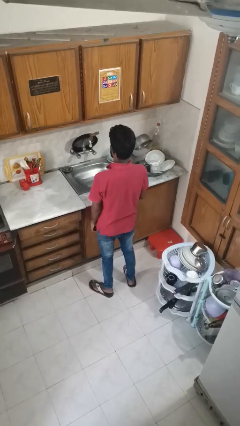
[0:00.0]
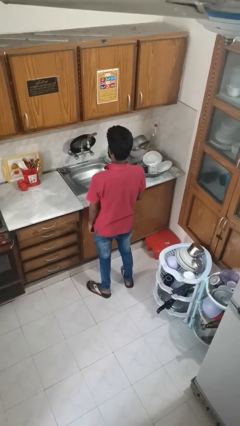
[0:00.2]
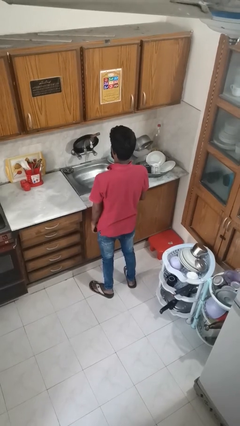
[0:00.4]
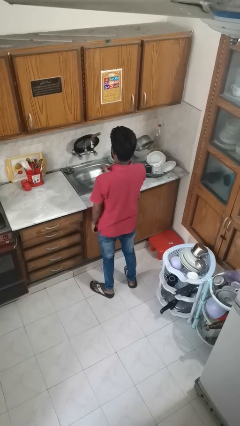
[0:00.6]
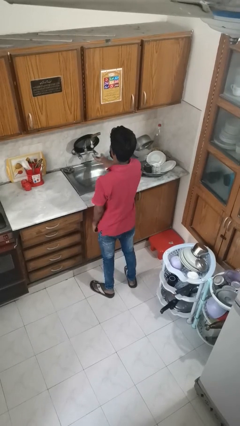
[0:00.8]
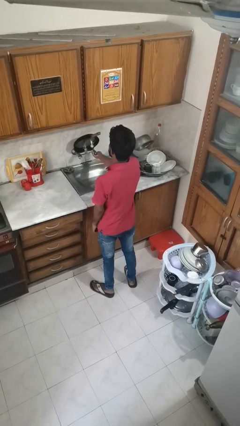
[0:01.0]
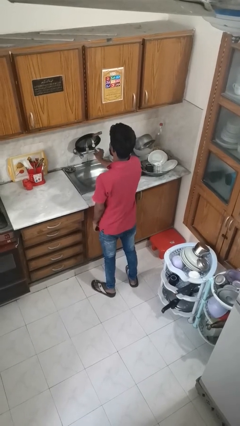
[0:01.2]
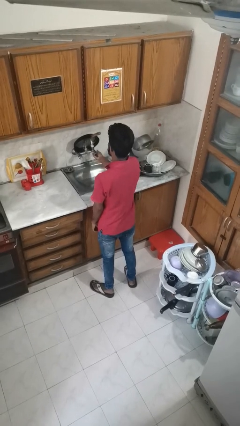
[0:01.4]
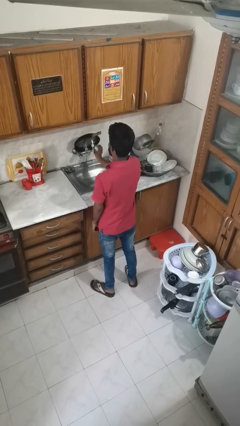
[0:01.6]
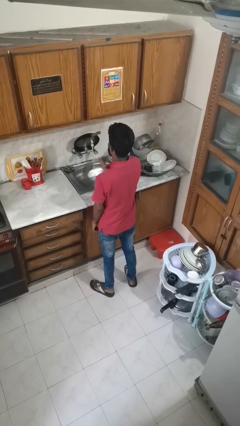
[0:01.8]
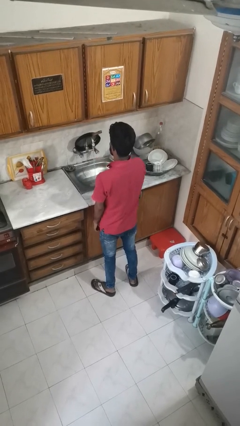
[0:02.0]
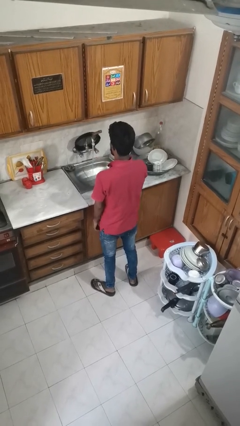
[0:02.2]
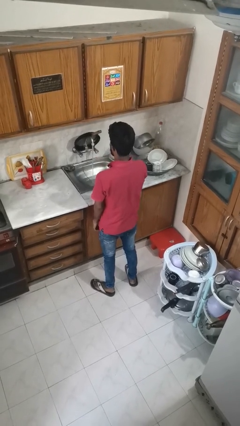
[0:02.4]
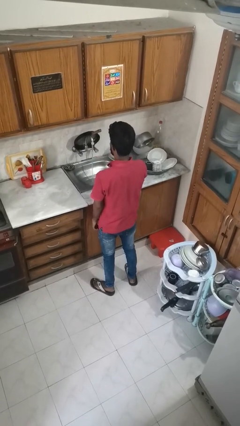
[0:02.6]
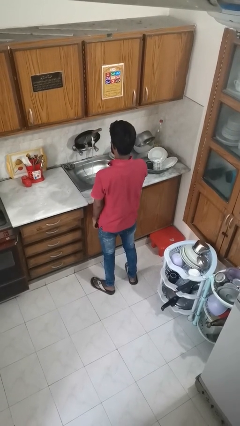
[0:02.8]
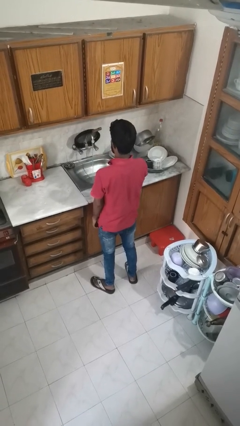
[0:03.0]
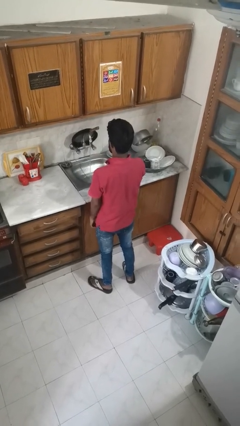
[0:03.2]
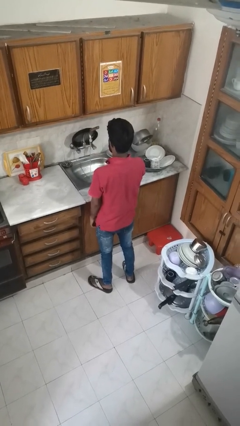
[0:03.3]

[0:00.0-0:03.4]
person turns on faucet

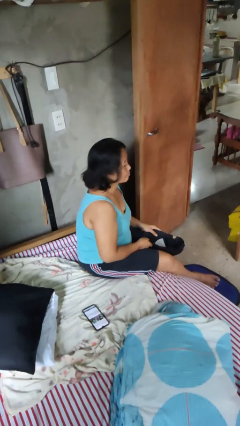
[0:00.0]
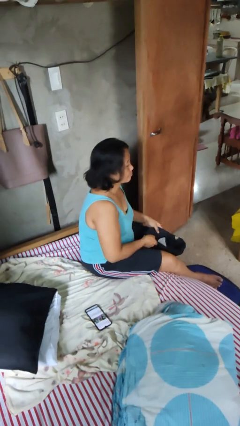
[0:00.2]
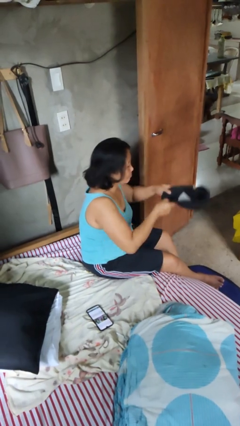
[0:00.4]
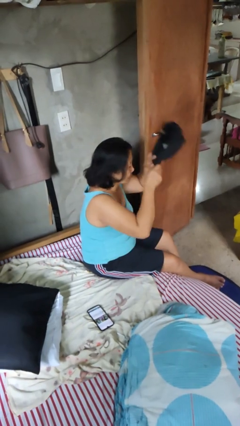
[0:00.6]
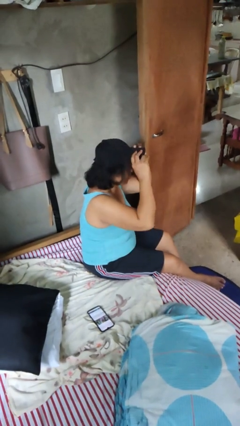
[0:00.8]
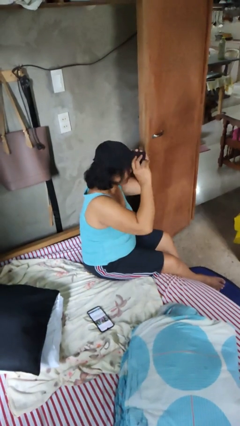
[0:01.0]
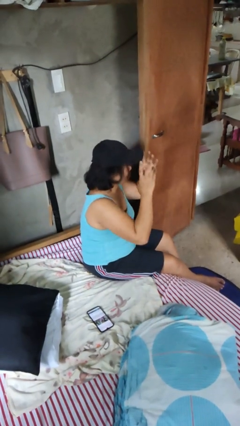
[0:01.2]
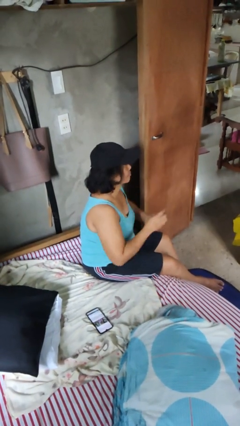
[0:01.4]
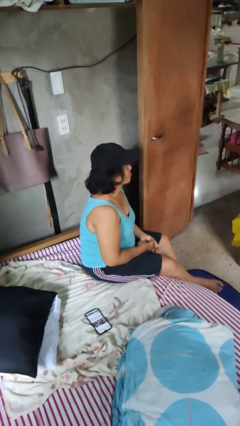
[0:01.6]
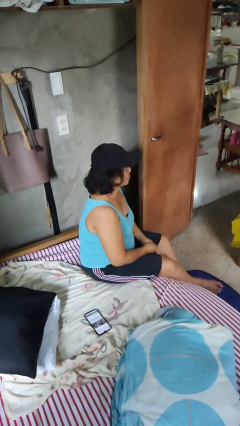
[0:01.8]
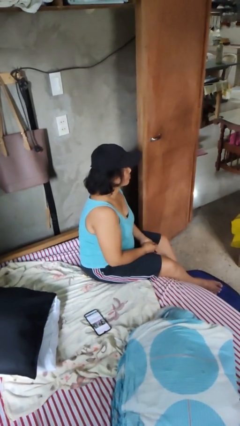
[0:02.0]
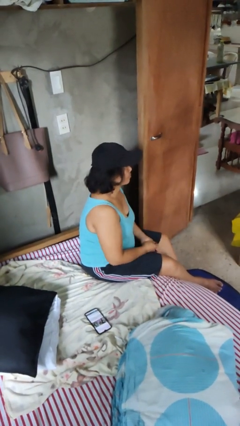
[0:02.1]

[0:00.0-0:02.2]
person puts on hat

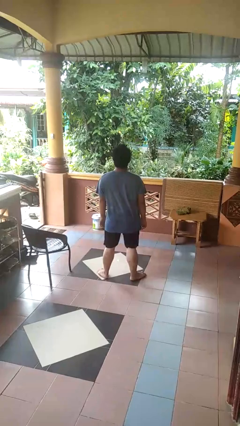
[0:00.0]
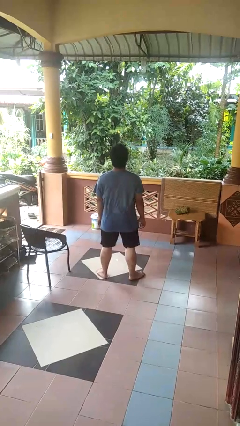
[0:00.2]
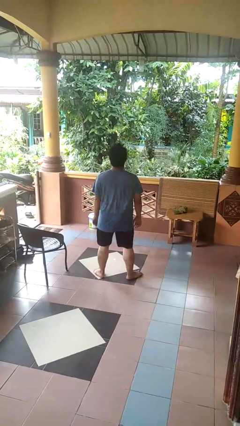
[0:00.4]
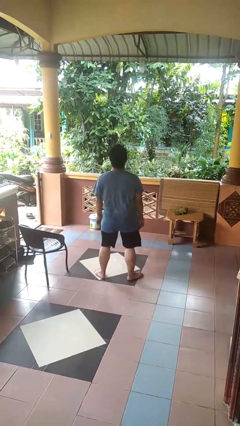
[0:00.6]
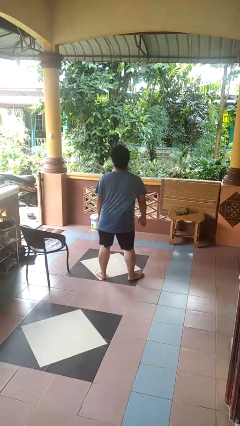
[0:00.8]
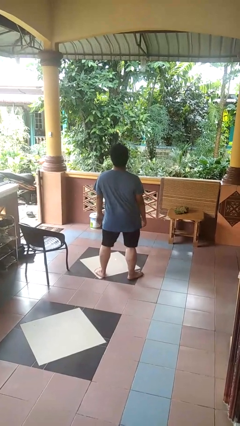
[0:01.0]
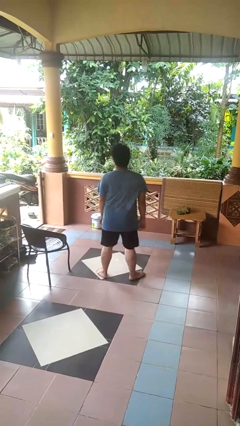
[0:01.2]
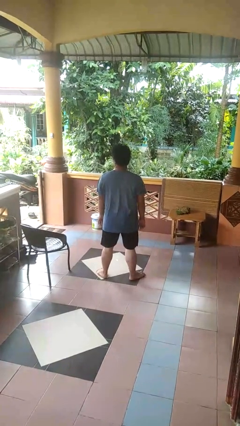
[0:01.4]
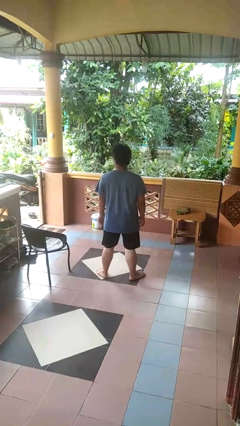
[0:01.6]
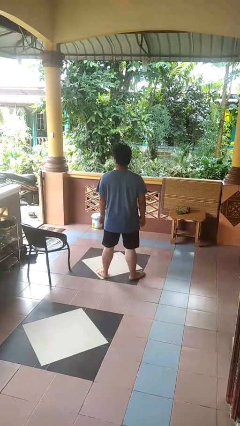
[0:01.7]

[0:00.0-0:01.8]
person wiggles hips

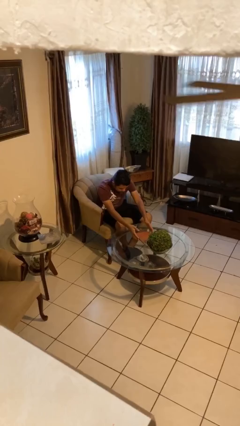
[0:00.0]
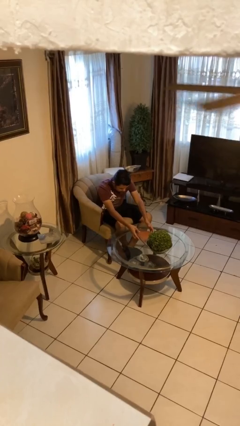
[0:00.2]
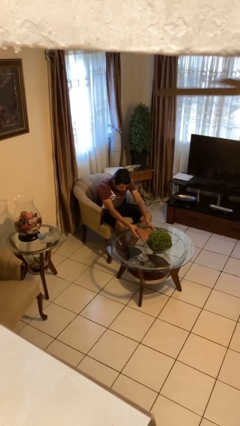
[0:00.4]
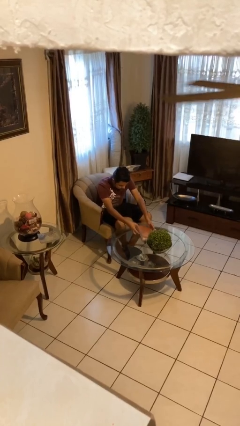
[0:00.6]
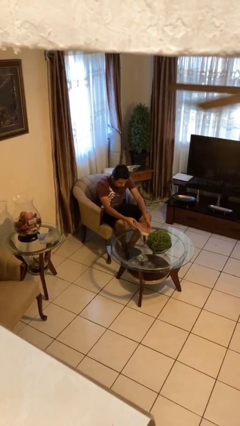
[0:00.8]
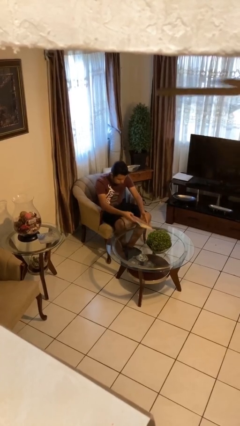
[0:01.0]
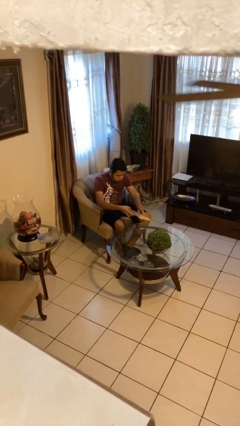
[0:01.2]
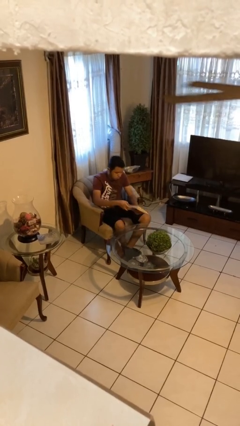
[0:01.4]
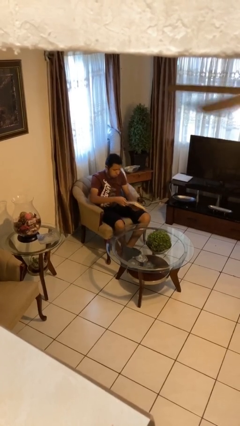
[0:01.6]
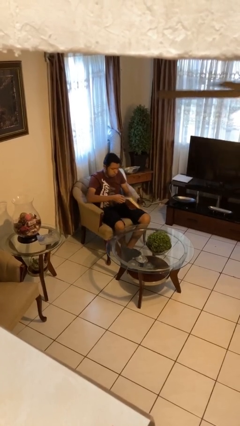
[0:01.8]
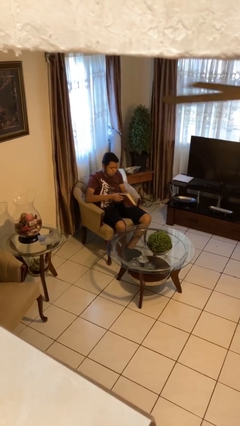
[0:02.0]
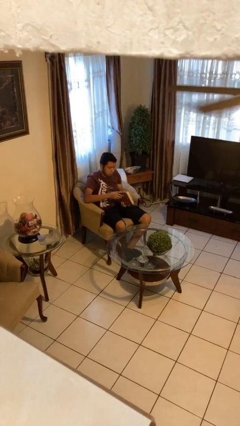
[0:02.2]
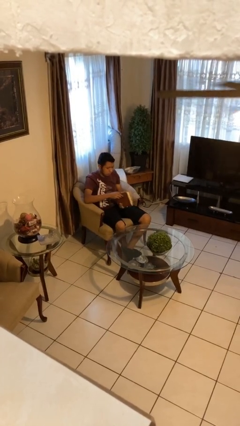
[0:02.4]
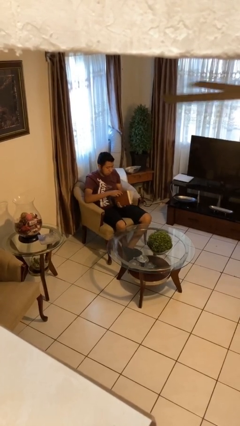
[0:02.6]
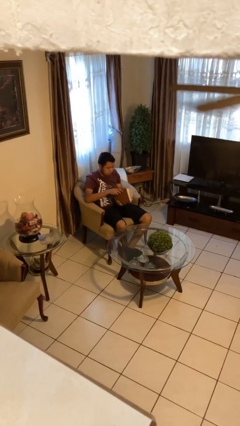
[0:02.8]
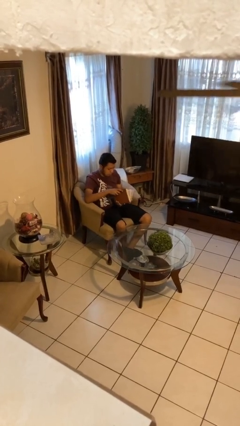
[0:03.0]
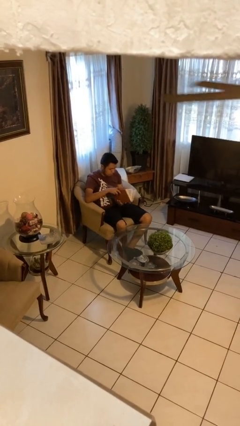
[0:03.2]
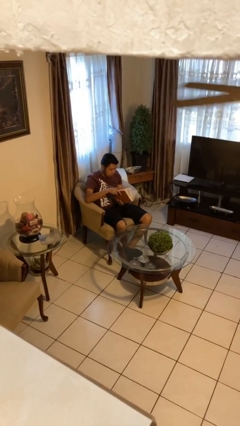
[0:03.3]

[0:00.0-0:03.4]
person picks up object from table

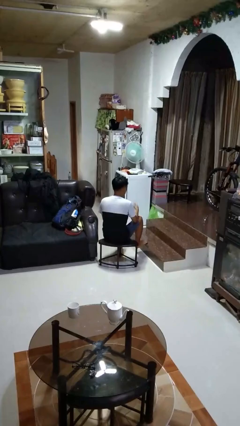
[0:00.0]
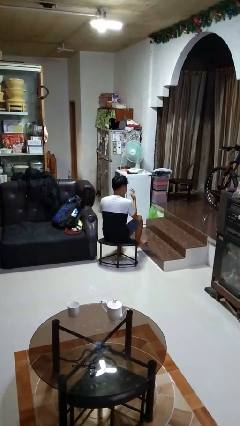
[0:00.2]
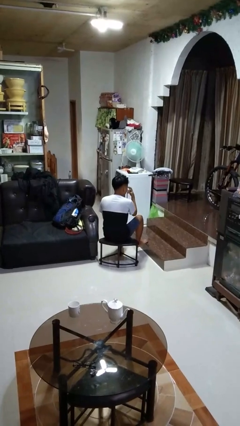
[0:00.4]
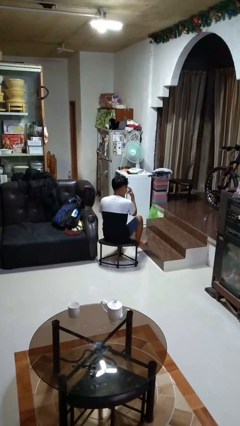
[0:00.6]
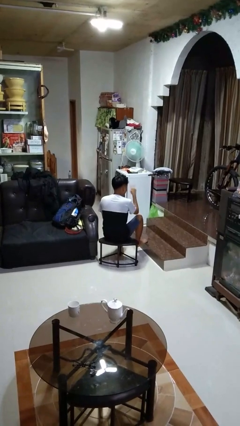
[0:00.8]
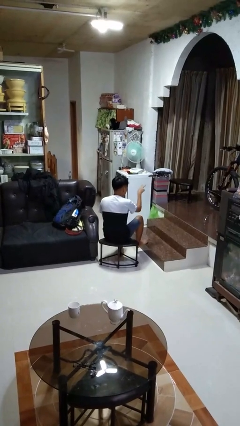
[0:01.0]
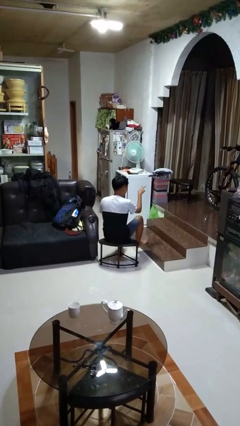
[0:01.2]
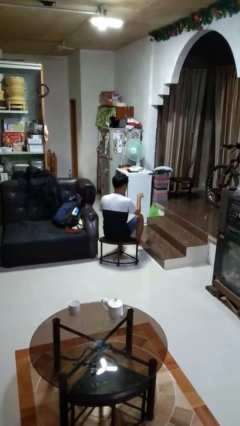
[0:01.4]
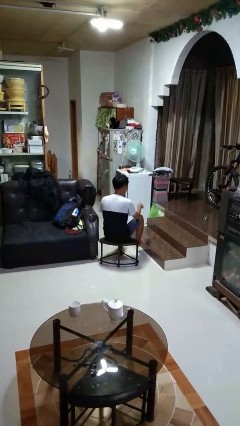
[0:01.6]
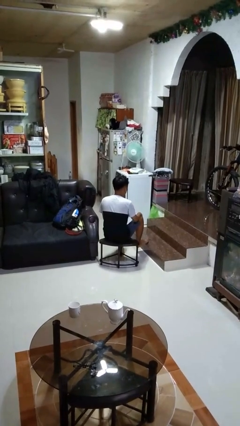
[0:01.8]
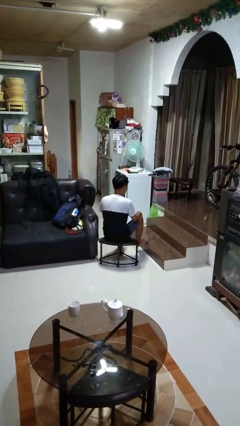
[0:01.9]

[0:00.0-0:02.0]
person gestures watch closely

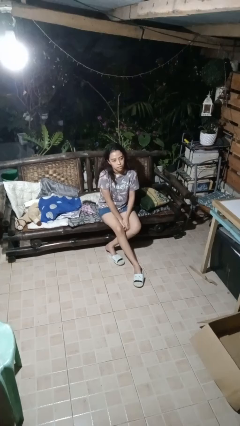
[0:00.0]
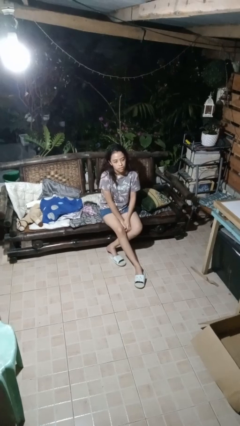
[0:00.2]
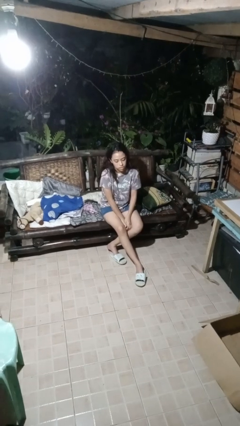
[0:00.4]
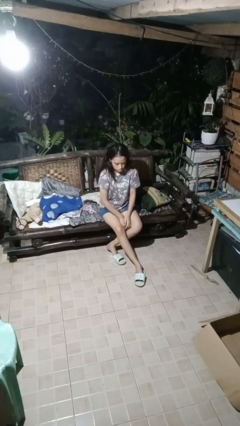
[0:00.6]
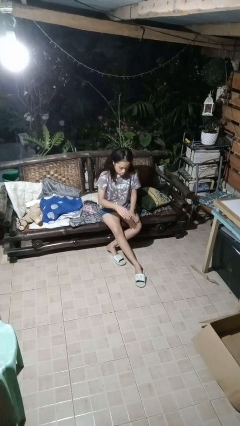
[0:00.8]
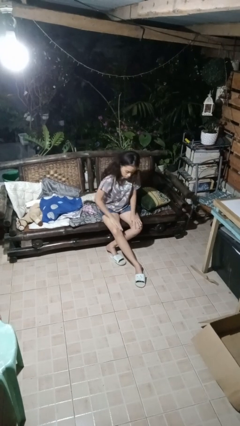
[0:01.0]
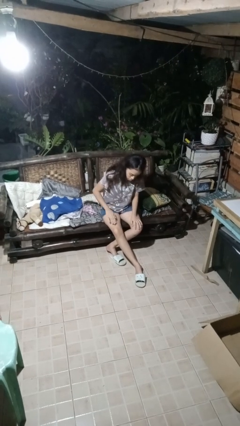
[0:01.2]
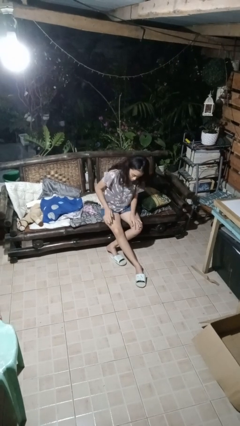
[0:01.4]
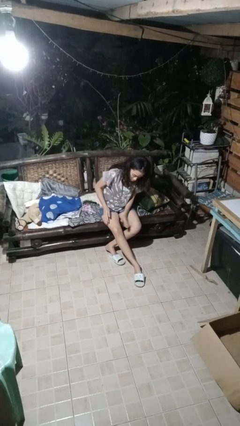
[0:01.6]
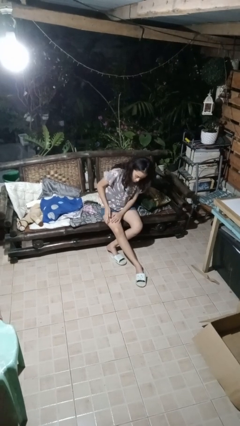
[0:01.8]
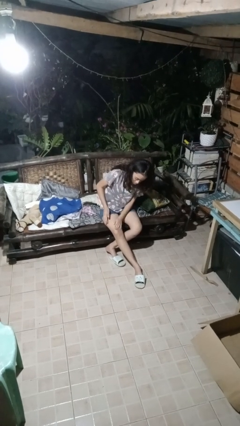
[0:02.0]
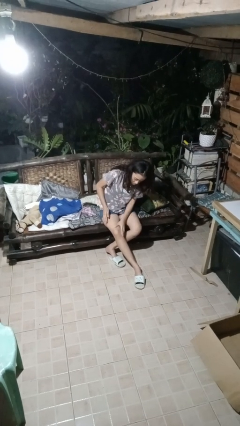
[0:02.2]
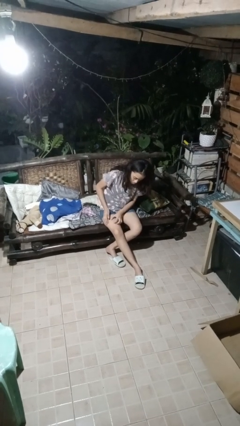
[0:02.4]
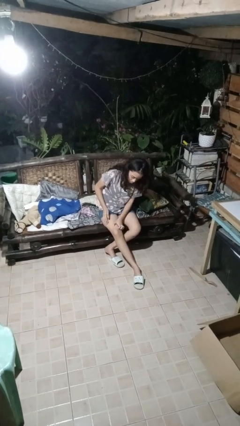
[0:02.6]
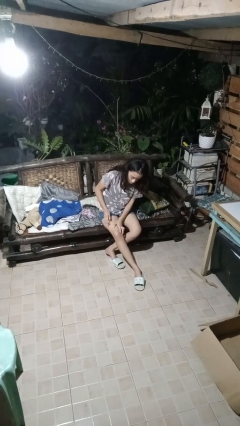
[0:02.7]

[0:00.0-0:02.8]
person swats bug

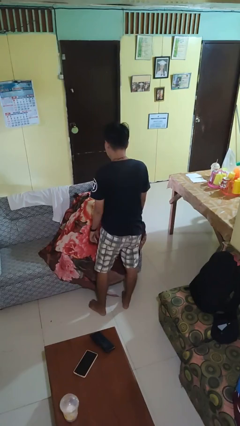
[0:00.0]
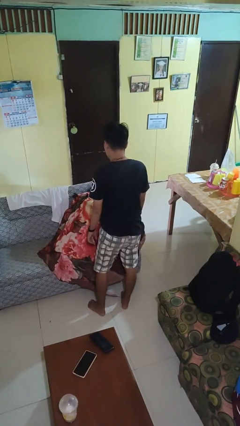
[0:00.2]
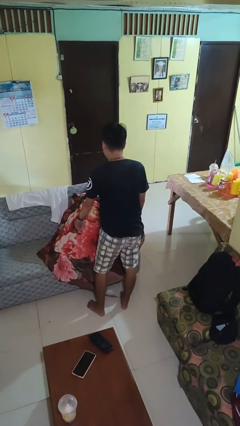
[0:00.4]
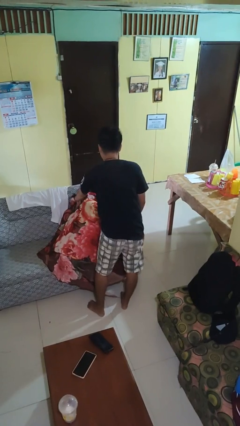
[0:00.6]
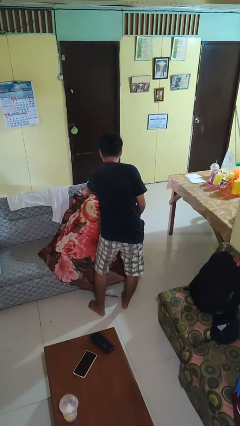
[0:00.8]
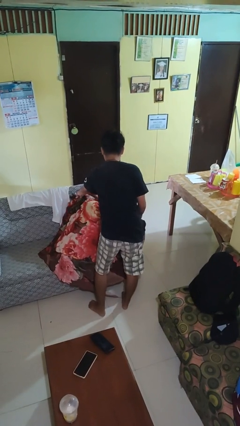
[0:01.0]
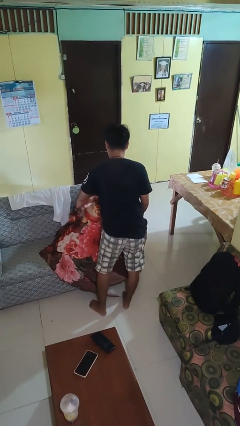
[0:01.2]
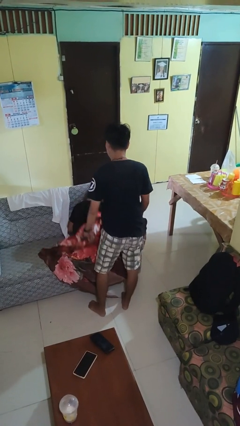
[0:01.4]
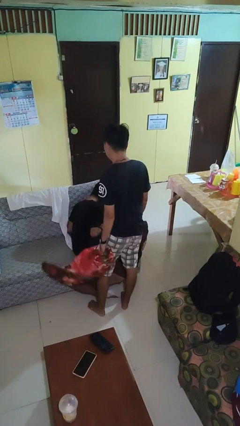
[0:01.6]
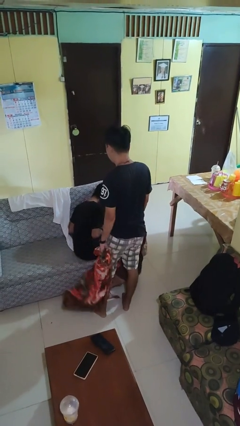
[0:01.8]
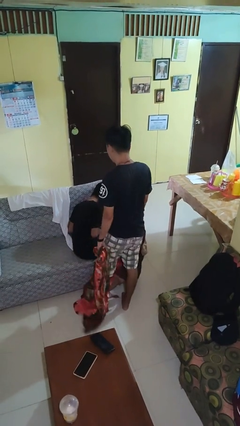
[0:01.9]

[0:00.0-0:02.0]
person uncovers friend with blanket
